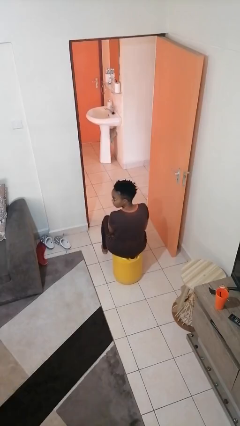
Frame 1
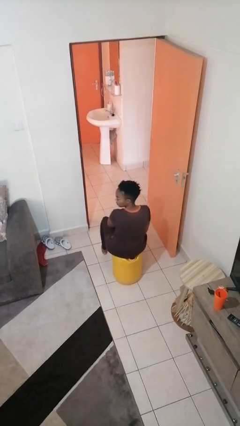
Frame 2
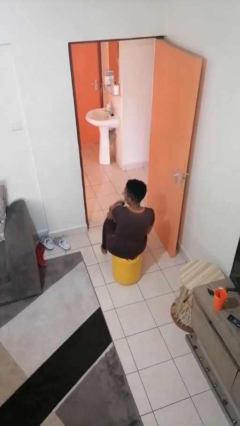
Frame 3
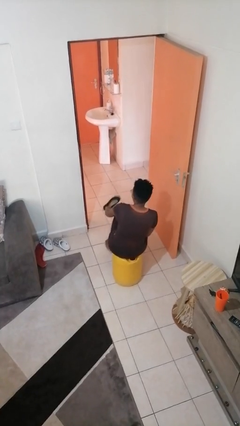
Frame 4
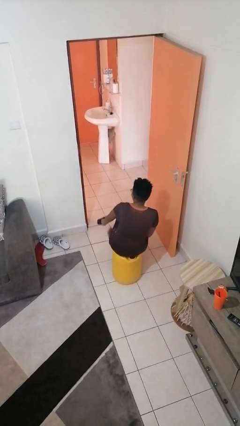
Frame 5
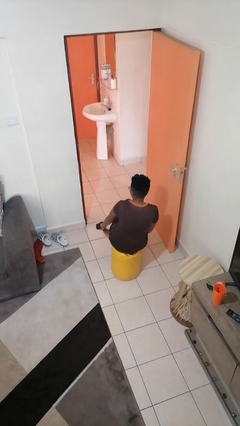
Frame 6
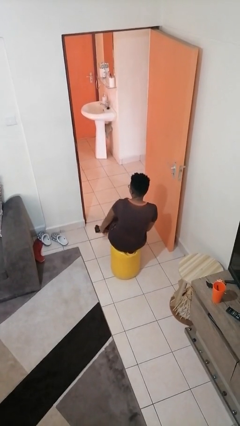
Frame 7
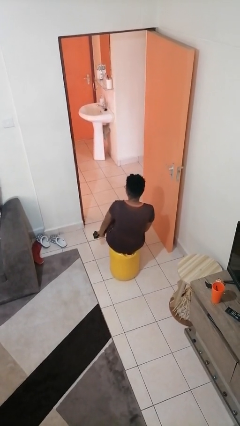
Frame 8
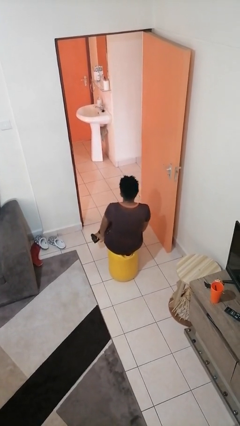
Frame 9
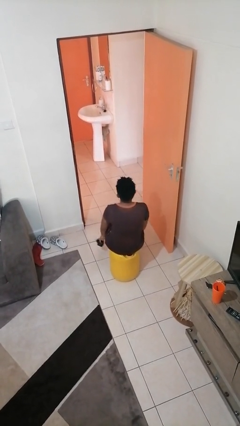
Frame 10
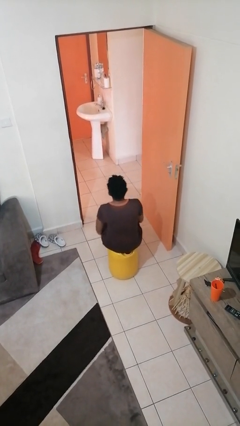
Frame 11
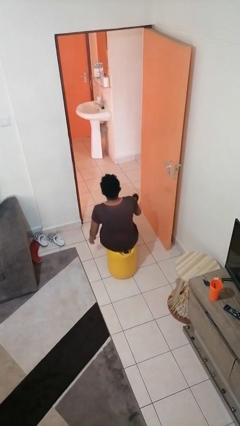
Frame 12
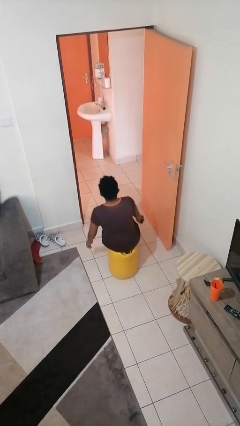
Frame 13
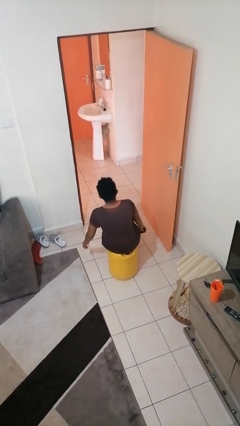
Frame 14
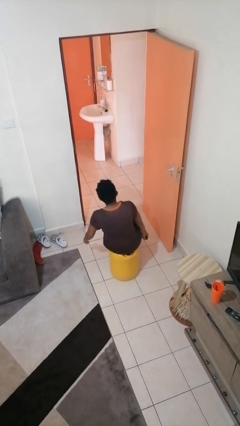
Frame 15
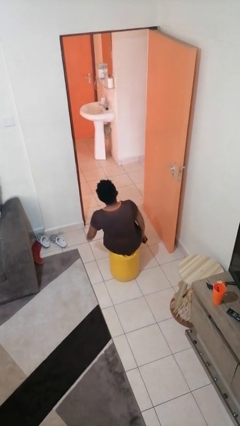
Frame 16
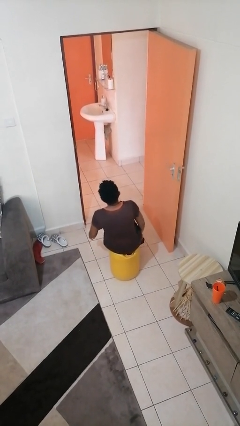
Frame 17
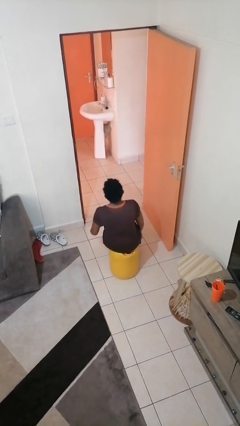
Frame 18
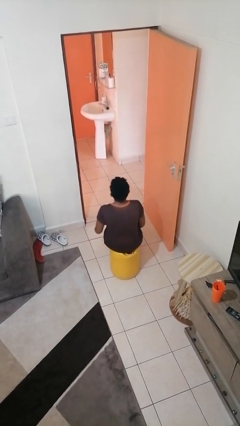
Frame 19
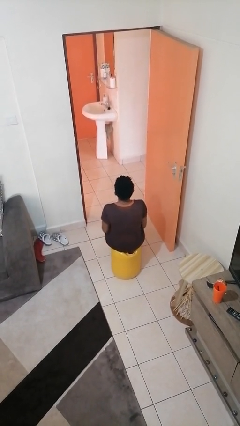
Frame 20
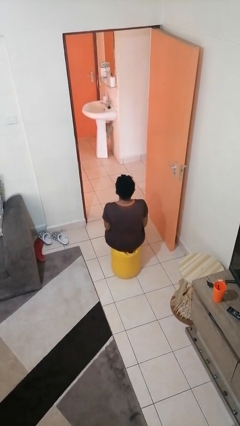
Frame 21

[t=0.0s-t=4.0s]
person puts on shoes

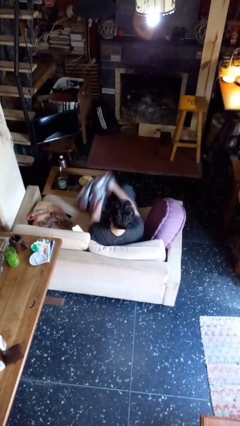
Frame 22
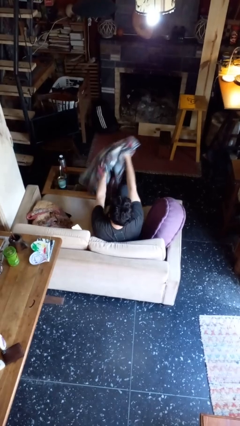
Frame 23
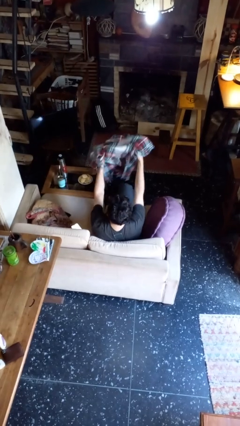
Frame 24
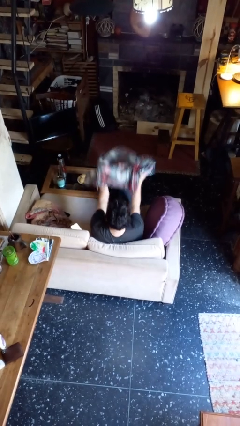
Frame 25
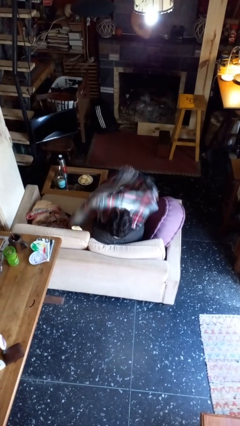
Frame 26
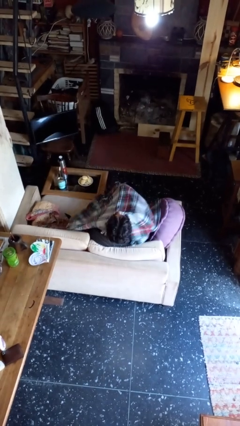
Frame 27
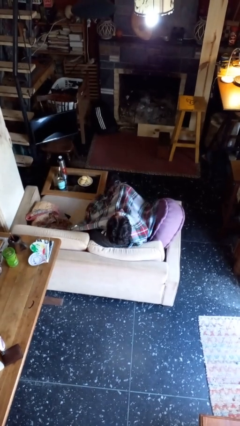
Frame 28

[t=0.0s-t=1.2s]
person covers with blanket

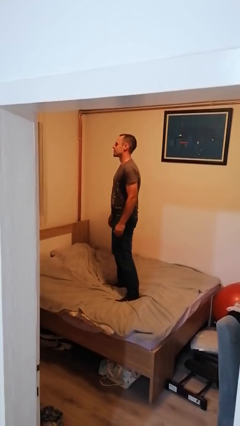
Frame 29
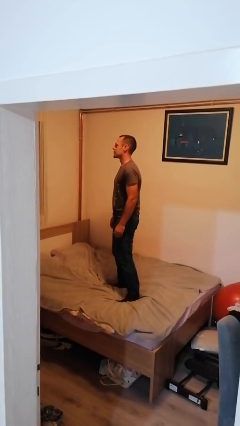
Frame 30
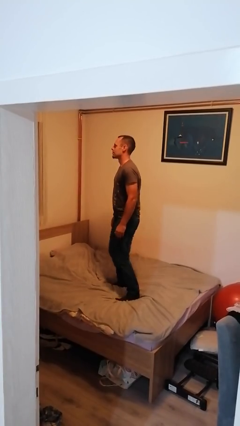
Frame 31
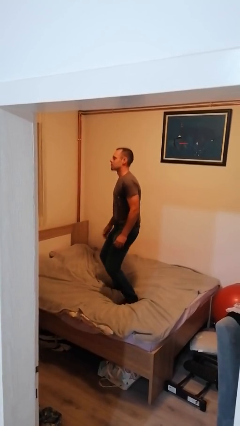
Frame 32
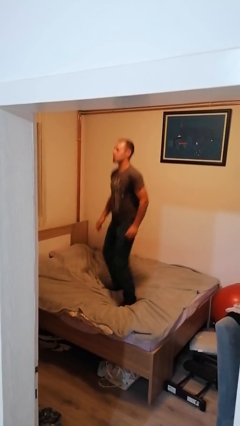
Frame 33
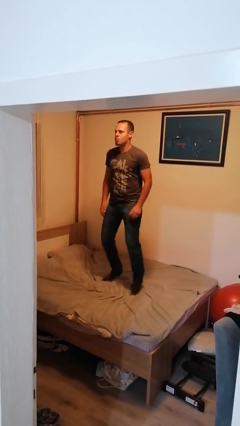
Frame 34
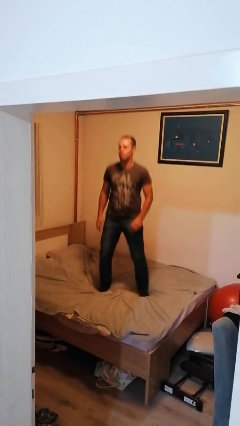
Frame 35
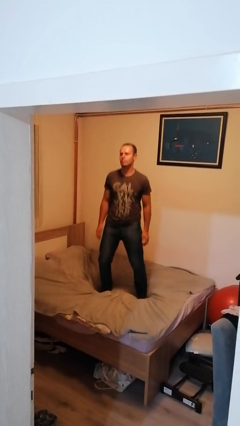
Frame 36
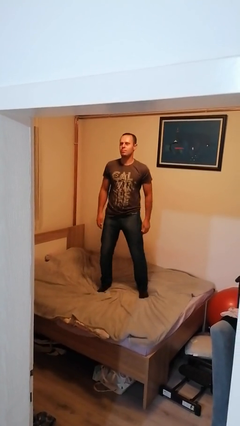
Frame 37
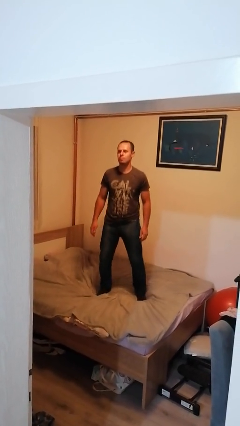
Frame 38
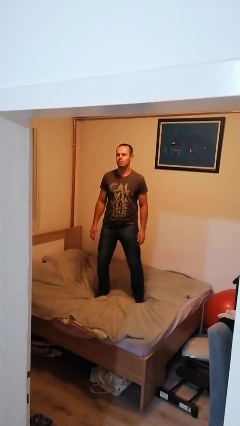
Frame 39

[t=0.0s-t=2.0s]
person jumps on bed

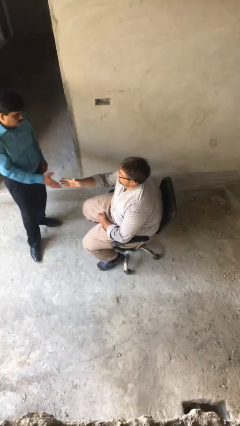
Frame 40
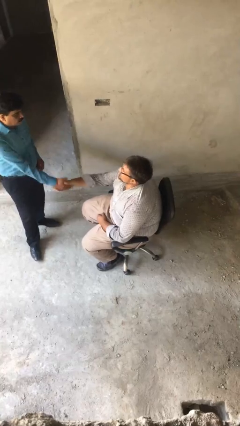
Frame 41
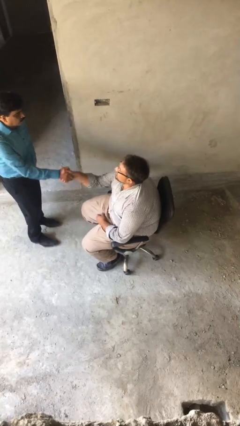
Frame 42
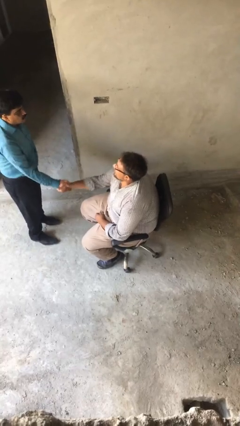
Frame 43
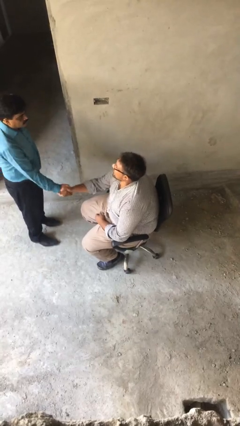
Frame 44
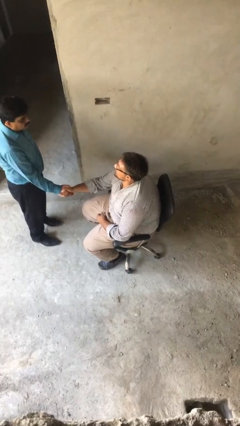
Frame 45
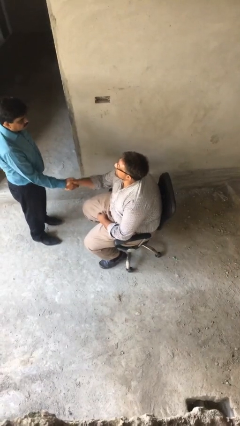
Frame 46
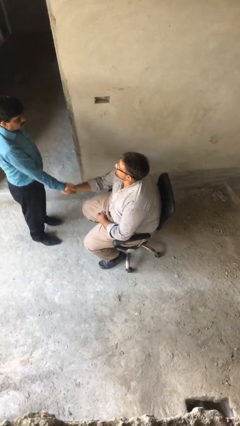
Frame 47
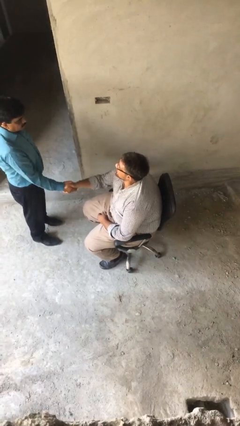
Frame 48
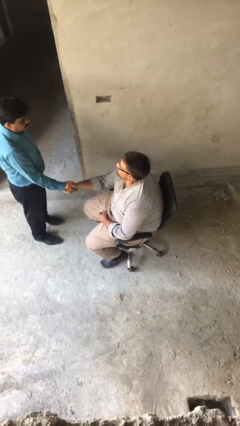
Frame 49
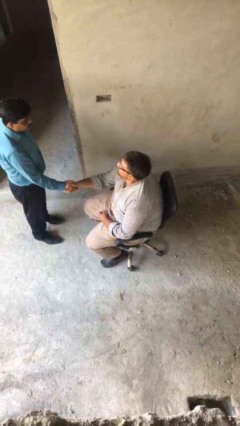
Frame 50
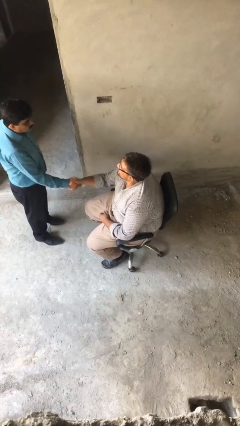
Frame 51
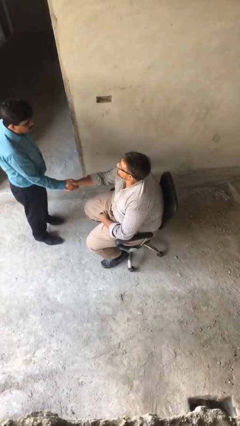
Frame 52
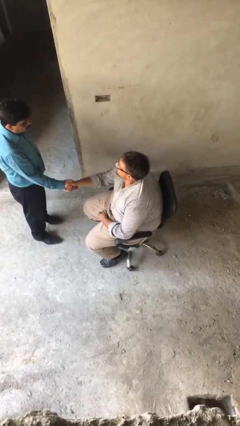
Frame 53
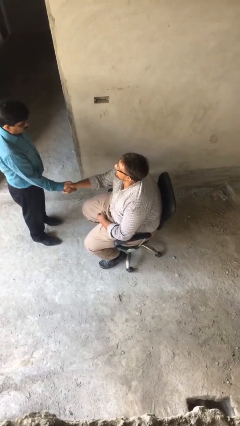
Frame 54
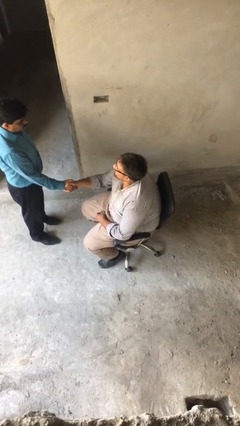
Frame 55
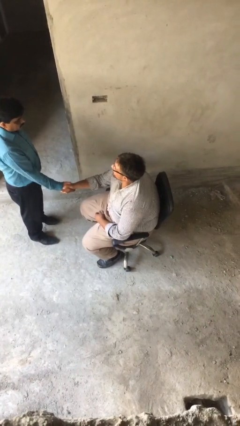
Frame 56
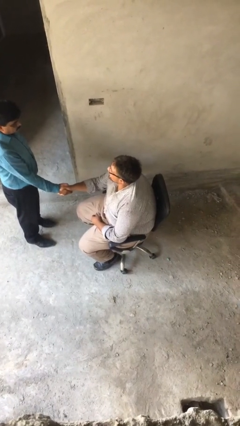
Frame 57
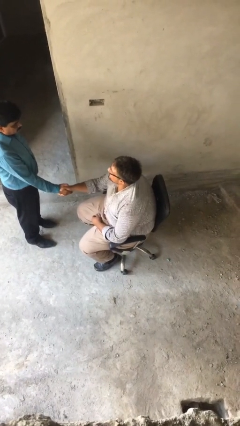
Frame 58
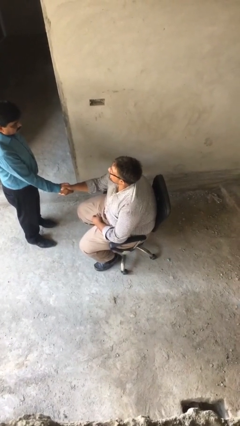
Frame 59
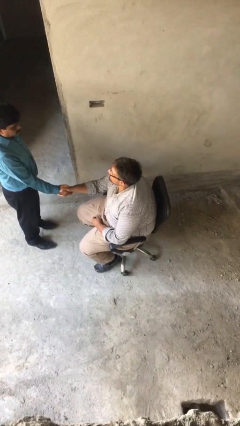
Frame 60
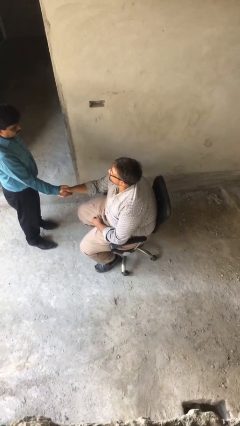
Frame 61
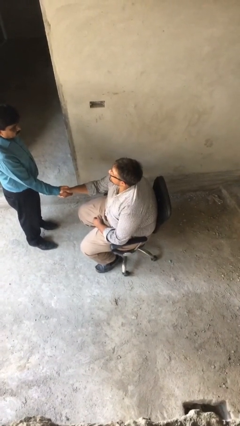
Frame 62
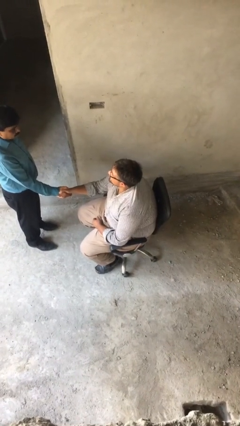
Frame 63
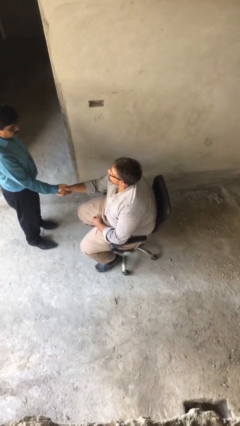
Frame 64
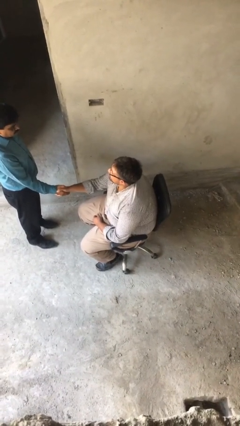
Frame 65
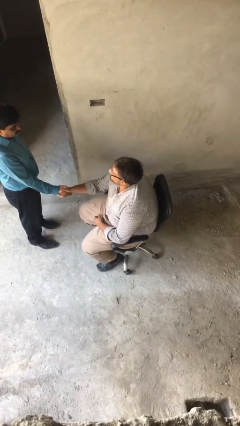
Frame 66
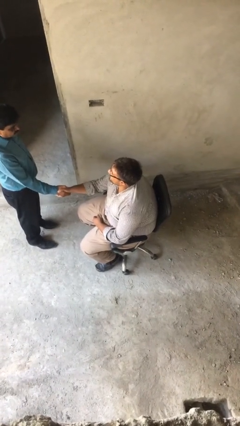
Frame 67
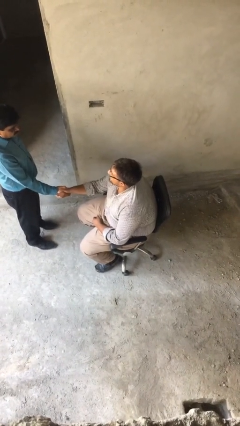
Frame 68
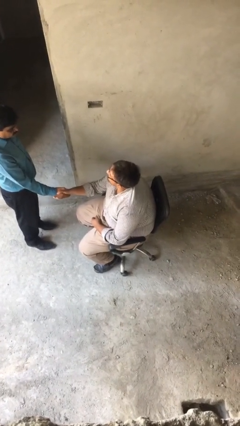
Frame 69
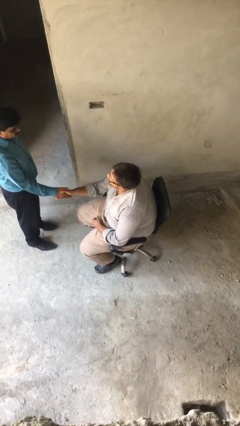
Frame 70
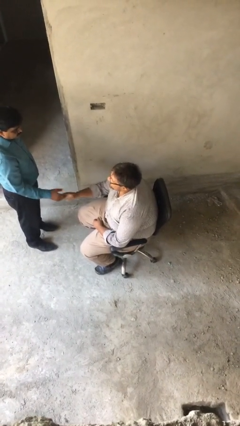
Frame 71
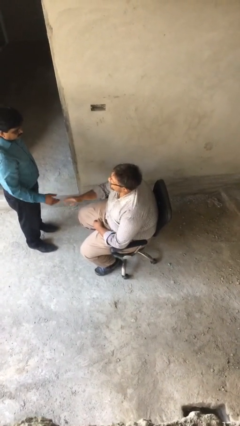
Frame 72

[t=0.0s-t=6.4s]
person shakes hand

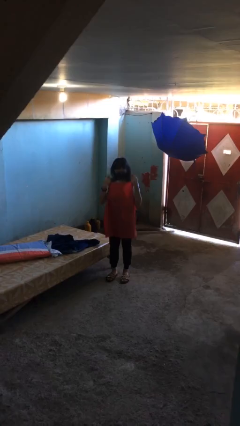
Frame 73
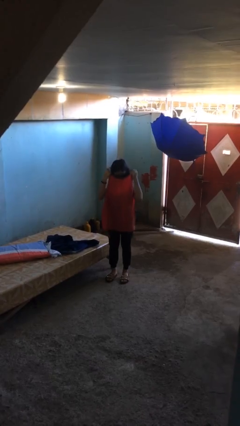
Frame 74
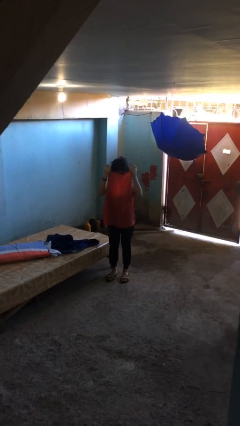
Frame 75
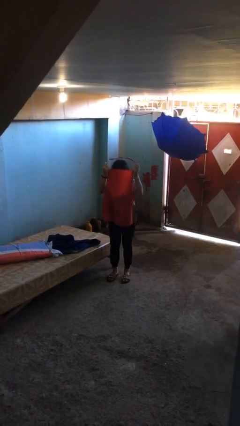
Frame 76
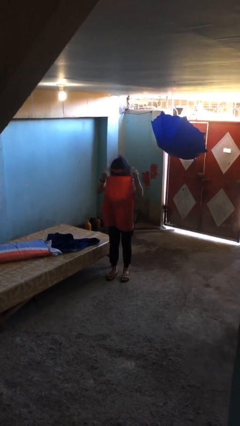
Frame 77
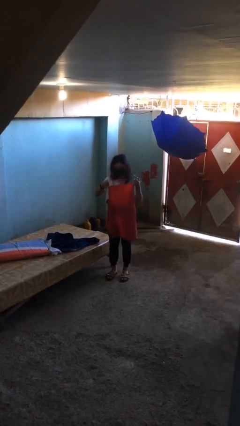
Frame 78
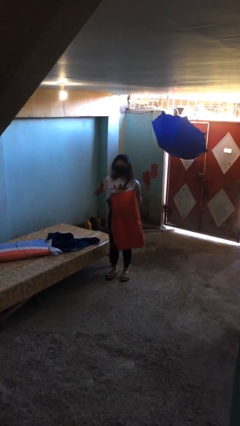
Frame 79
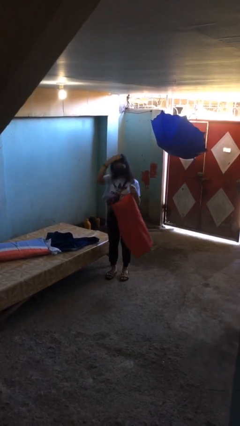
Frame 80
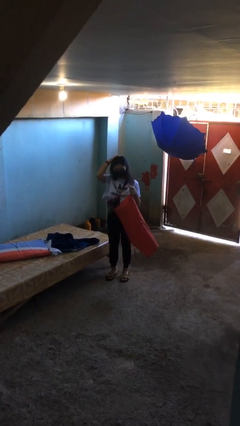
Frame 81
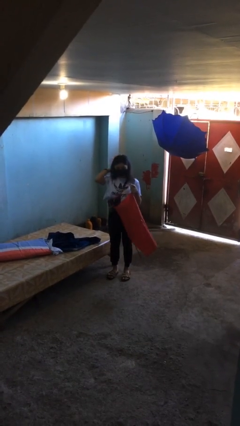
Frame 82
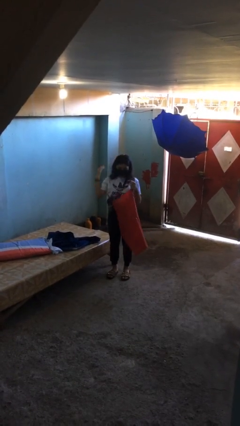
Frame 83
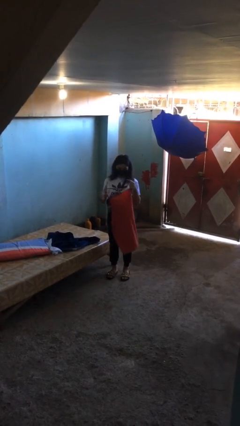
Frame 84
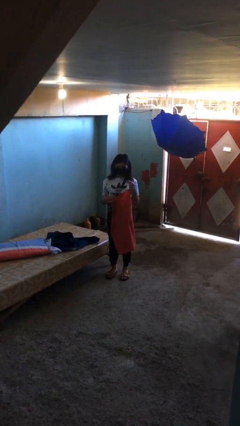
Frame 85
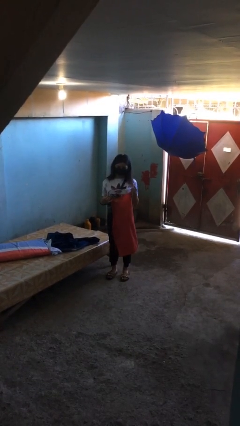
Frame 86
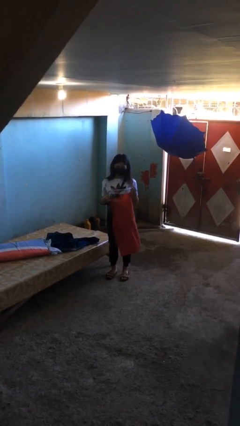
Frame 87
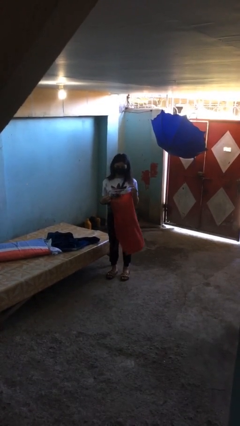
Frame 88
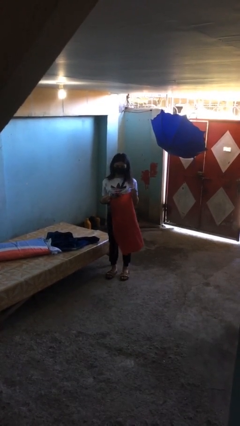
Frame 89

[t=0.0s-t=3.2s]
person takes off apron

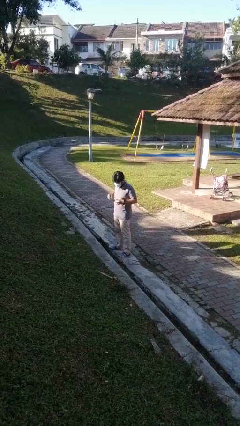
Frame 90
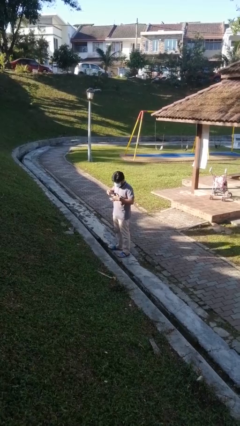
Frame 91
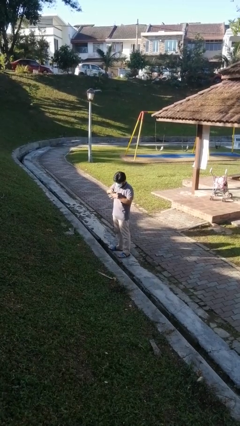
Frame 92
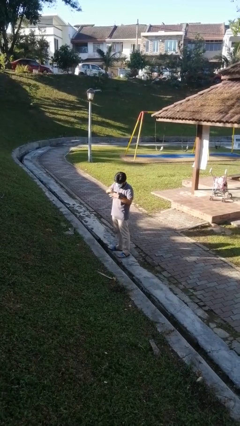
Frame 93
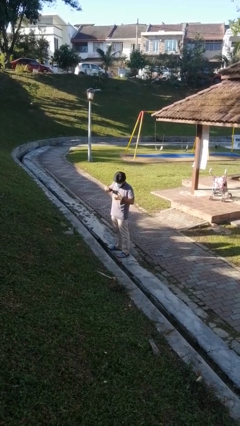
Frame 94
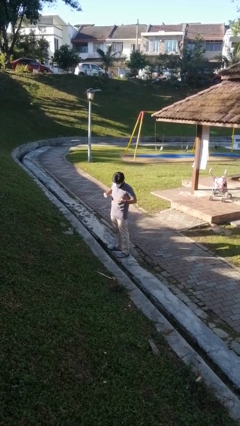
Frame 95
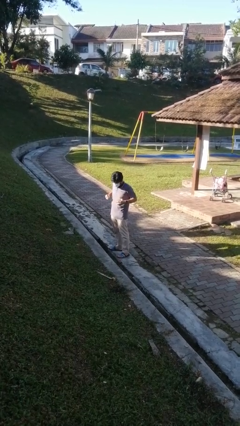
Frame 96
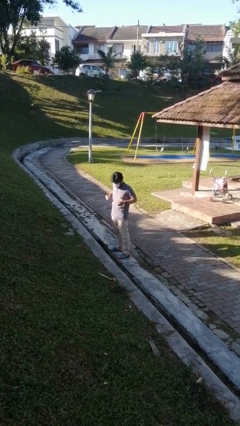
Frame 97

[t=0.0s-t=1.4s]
person takes off ring
